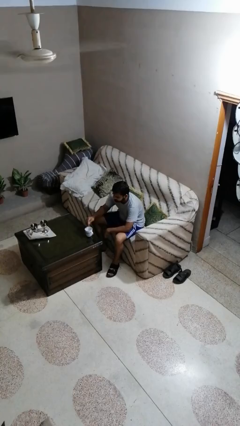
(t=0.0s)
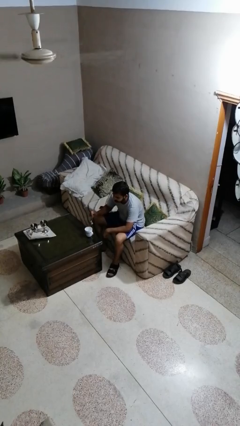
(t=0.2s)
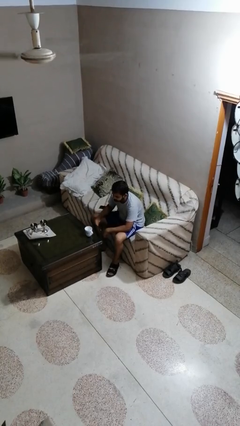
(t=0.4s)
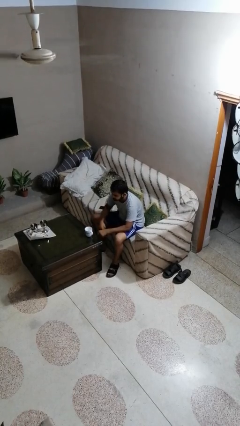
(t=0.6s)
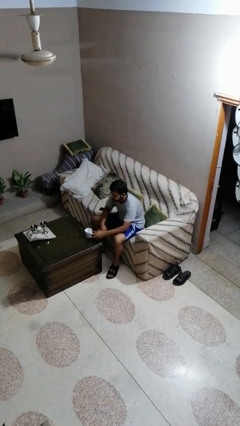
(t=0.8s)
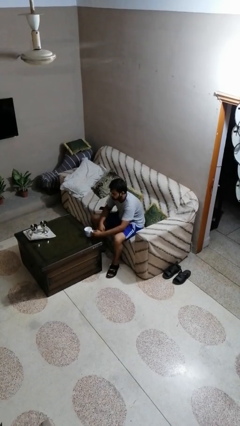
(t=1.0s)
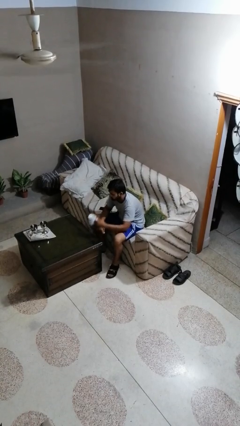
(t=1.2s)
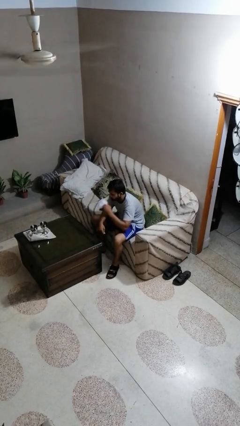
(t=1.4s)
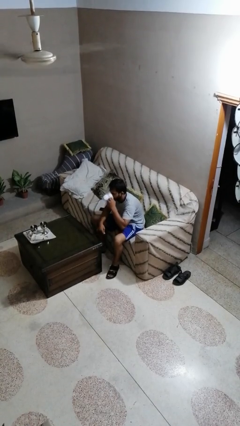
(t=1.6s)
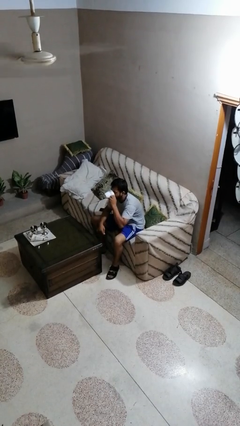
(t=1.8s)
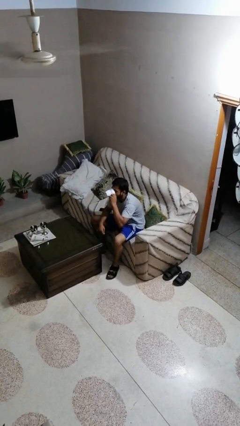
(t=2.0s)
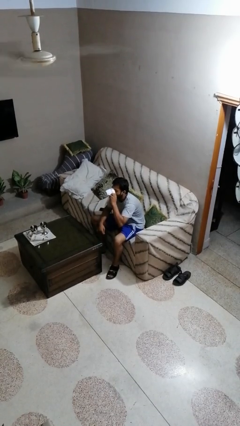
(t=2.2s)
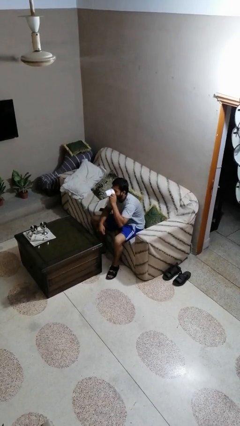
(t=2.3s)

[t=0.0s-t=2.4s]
person drinks from mug

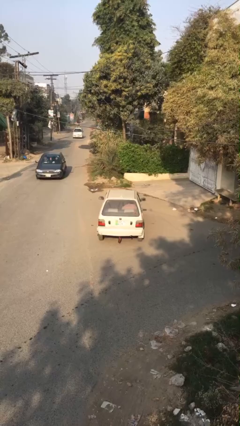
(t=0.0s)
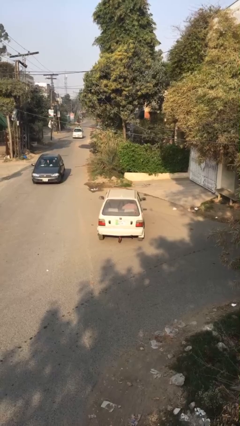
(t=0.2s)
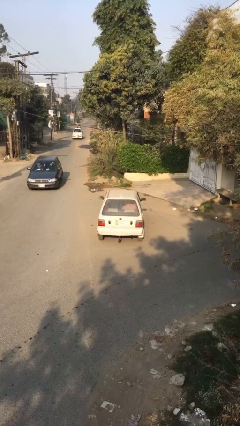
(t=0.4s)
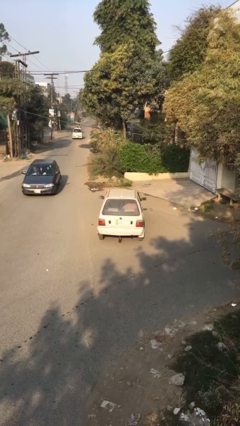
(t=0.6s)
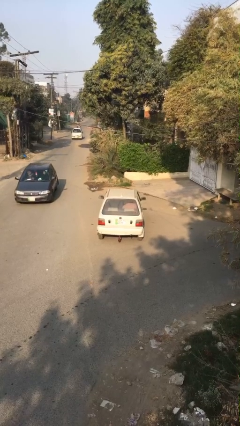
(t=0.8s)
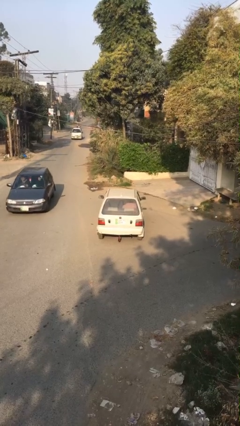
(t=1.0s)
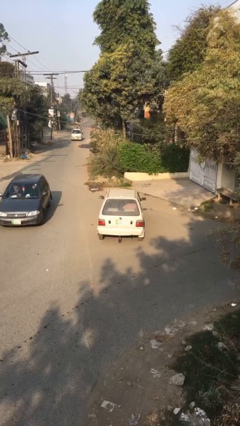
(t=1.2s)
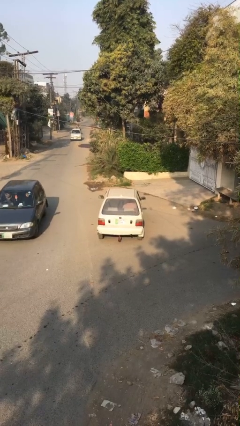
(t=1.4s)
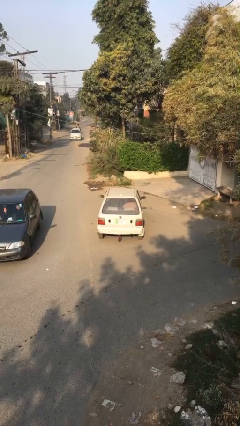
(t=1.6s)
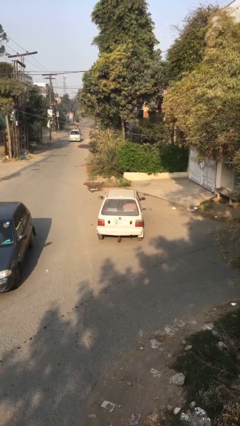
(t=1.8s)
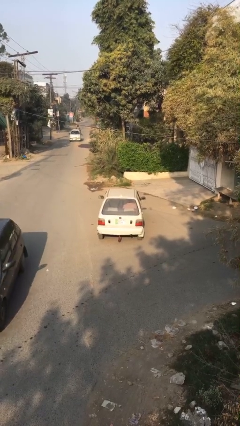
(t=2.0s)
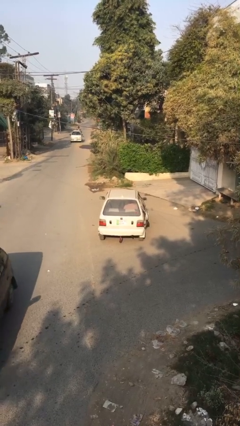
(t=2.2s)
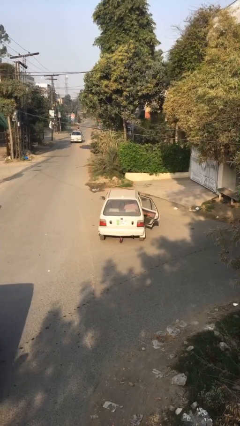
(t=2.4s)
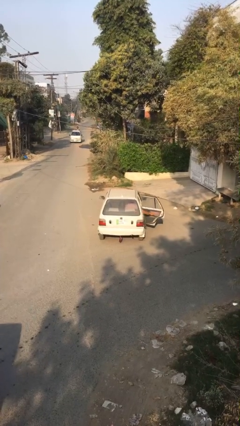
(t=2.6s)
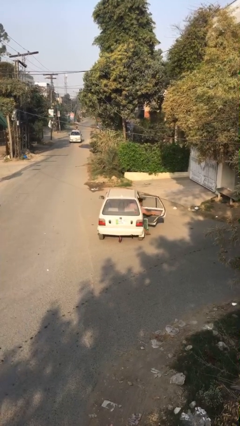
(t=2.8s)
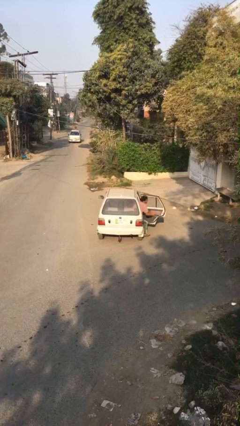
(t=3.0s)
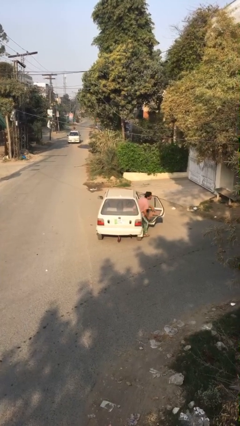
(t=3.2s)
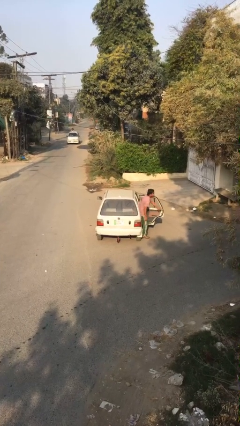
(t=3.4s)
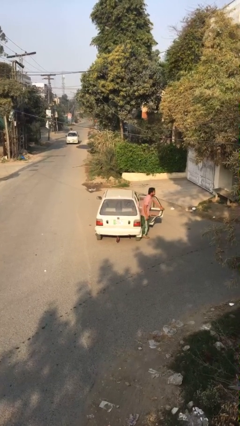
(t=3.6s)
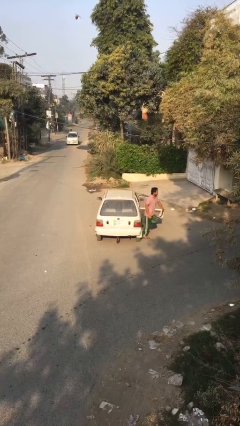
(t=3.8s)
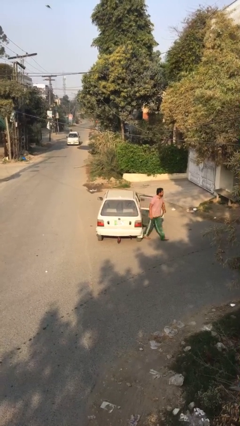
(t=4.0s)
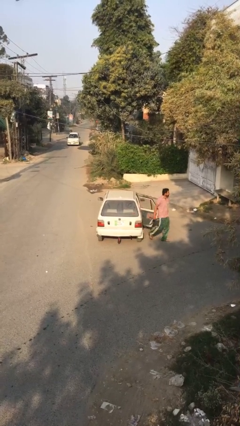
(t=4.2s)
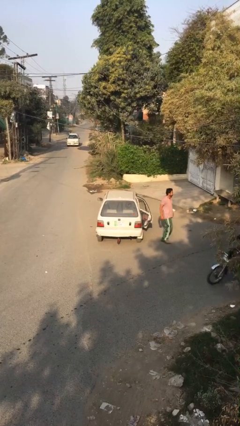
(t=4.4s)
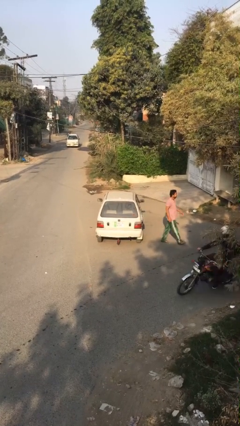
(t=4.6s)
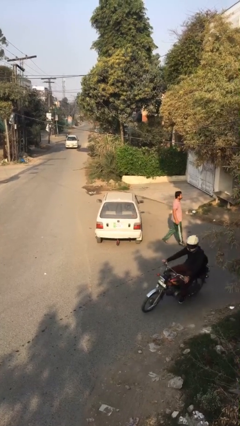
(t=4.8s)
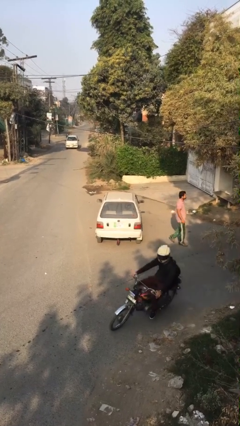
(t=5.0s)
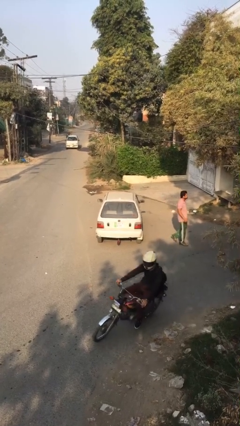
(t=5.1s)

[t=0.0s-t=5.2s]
car drops off person

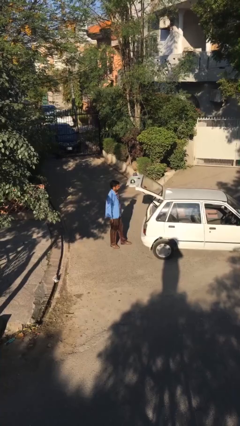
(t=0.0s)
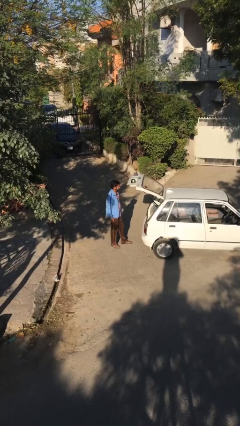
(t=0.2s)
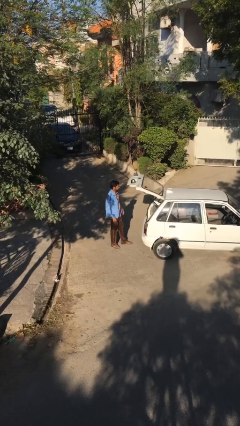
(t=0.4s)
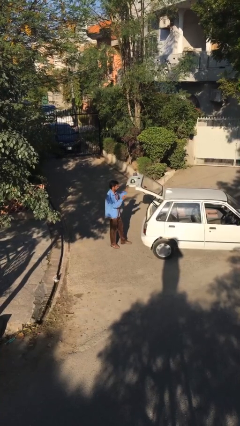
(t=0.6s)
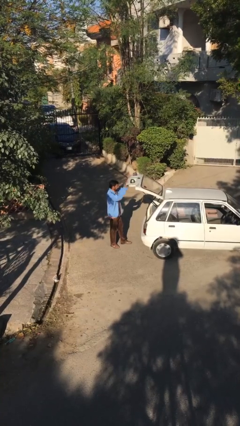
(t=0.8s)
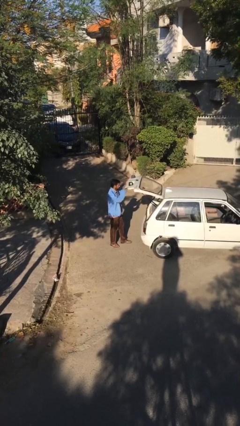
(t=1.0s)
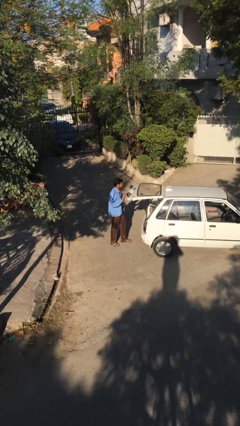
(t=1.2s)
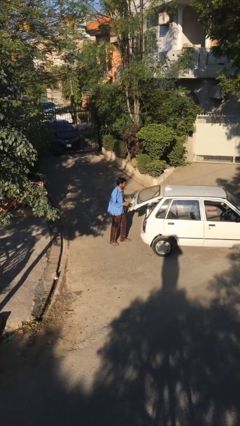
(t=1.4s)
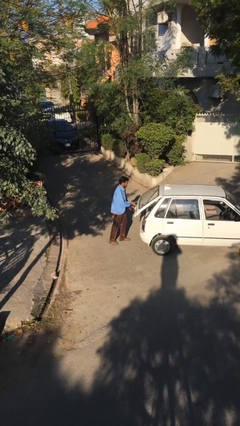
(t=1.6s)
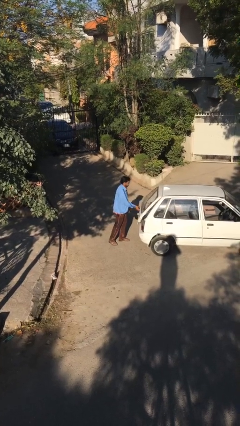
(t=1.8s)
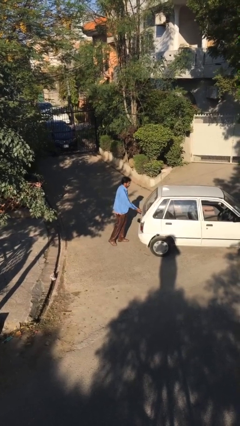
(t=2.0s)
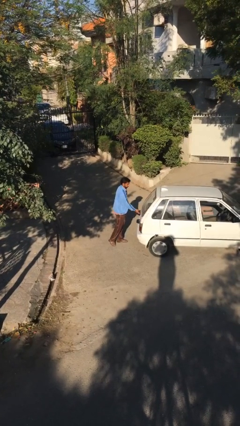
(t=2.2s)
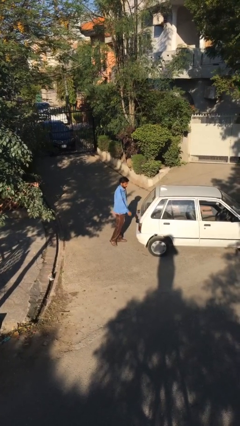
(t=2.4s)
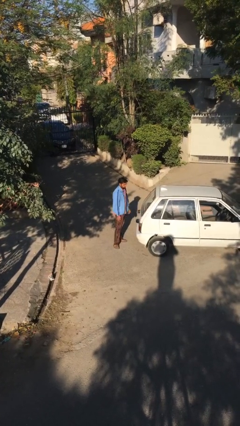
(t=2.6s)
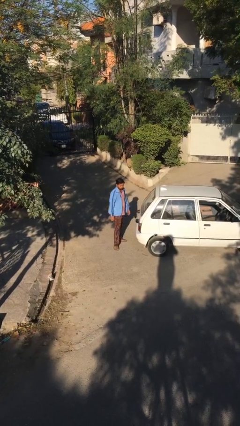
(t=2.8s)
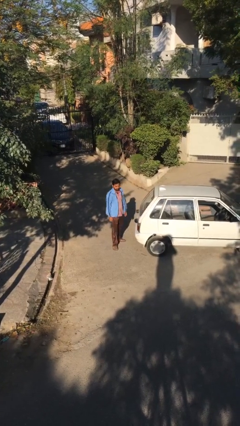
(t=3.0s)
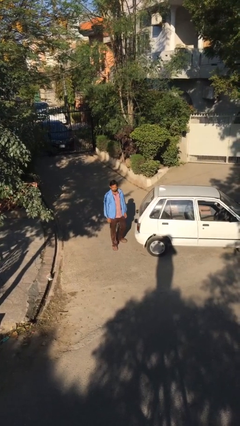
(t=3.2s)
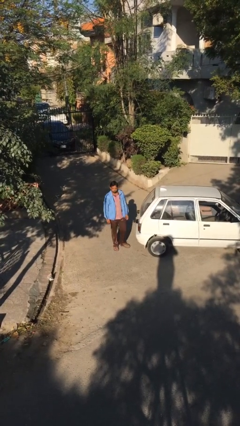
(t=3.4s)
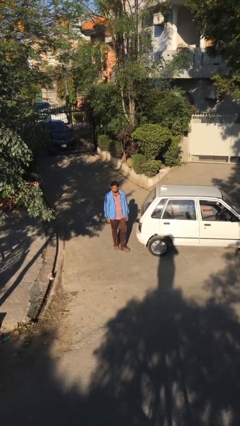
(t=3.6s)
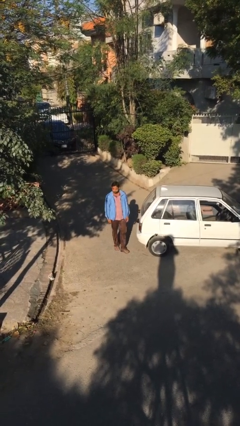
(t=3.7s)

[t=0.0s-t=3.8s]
person closes car trunk

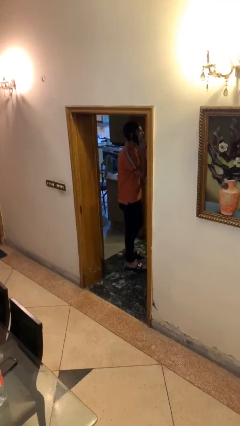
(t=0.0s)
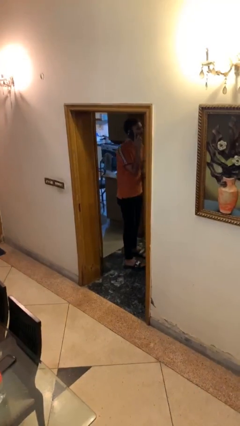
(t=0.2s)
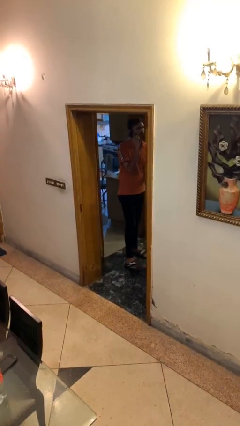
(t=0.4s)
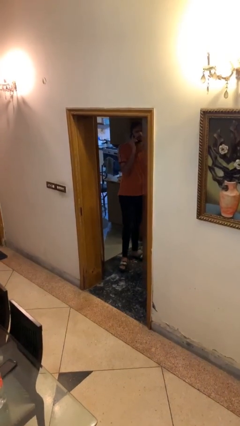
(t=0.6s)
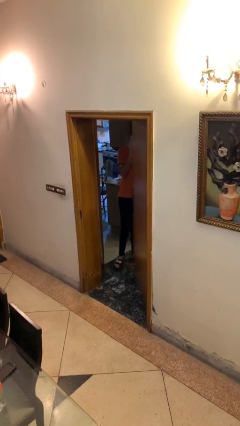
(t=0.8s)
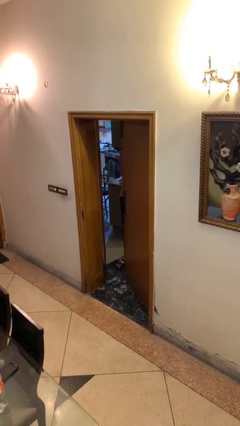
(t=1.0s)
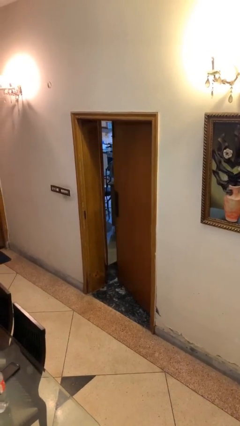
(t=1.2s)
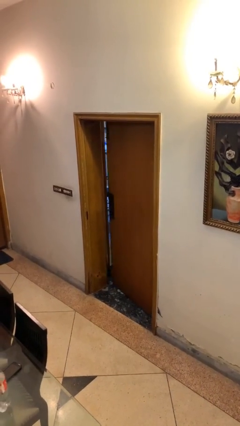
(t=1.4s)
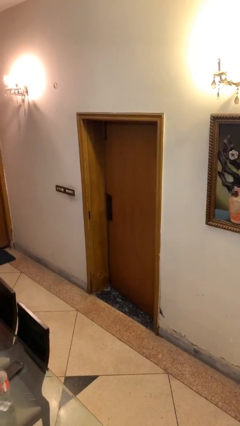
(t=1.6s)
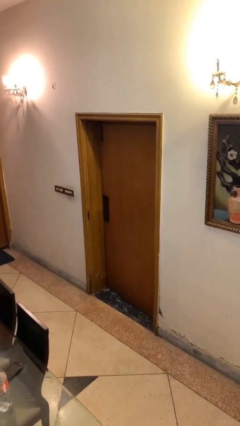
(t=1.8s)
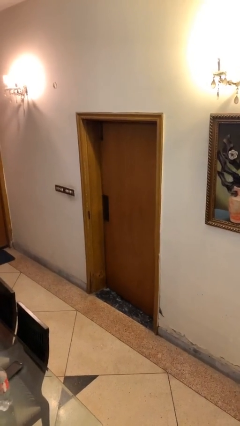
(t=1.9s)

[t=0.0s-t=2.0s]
person closes facility door

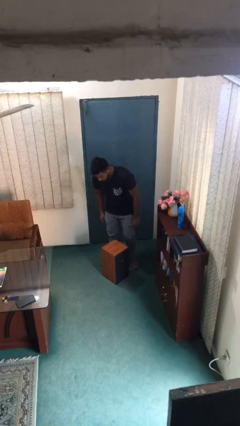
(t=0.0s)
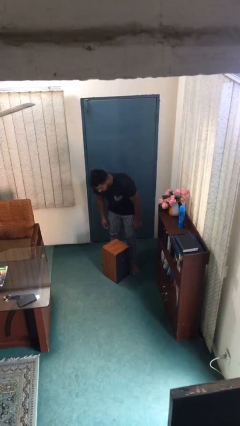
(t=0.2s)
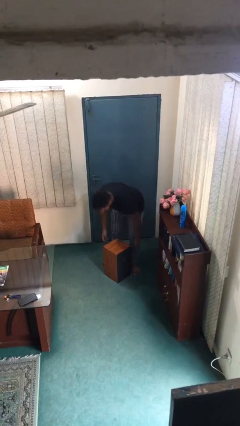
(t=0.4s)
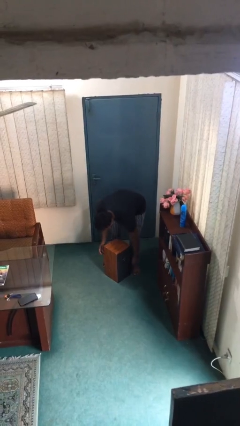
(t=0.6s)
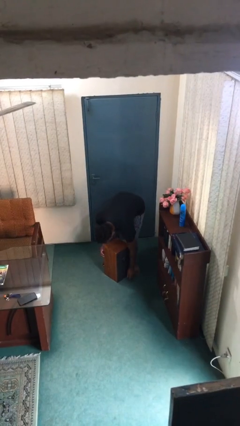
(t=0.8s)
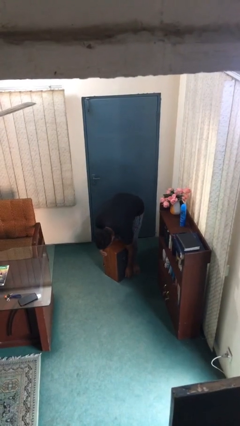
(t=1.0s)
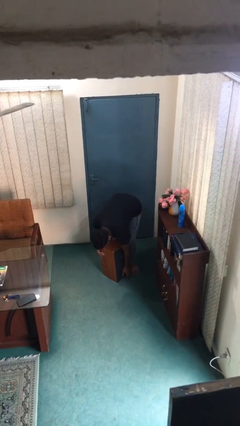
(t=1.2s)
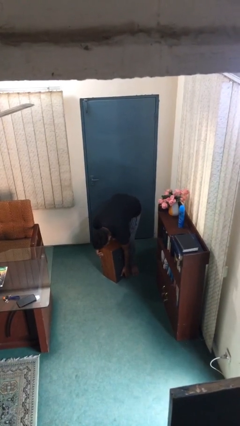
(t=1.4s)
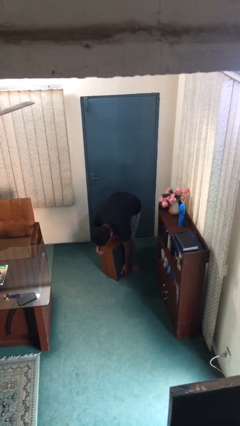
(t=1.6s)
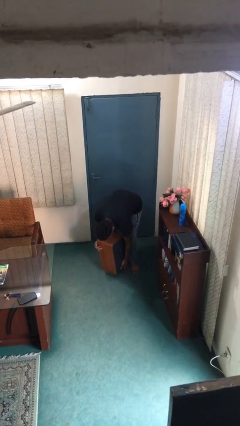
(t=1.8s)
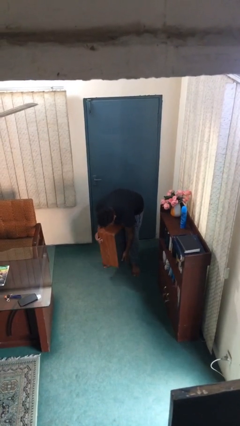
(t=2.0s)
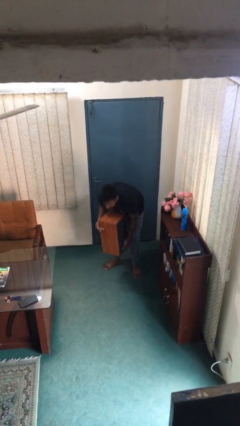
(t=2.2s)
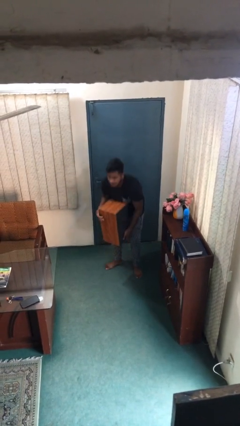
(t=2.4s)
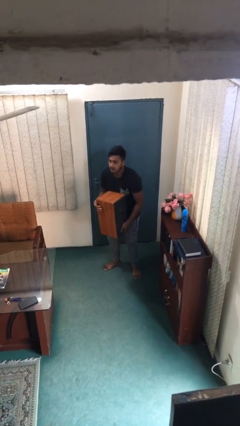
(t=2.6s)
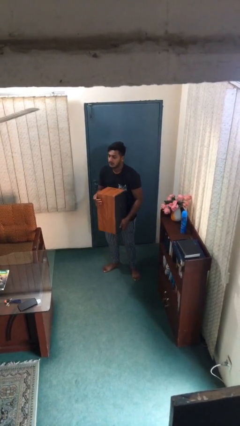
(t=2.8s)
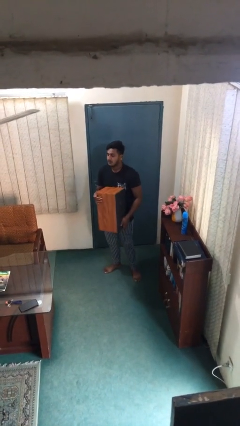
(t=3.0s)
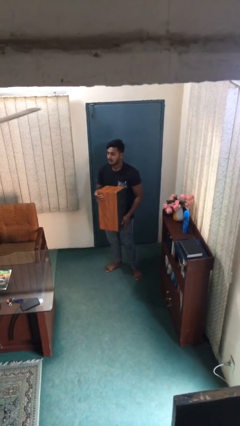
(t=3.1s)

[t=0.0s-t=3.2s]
person picks up object from floor

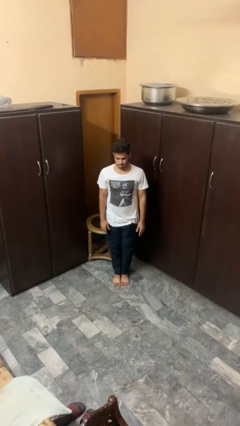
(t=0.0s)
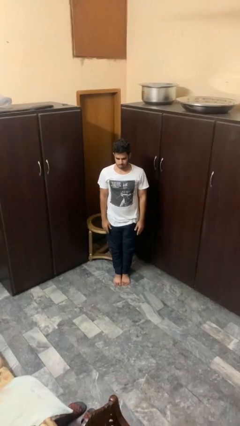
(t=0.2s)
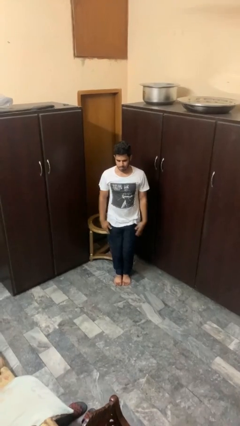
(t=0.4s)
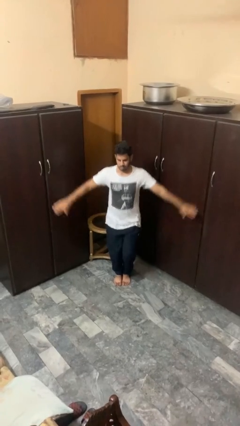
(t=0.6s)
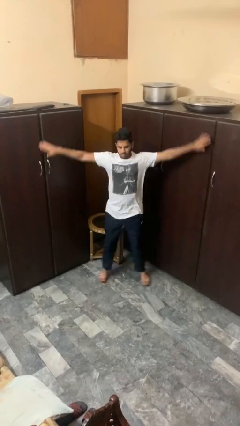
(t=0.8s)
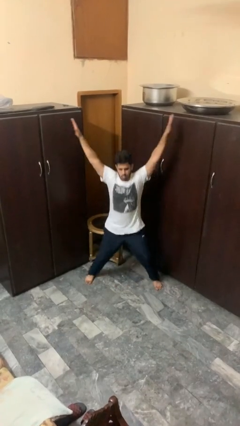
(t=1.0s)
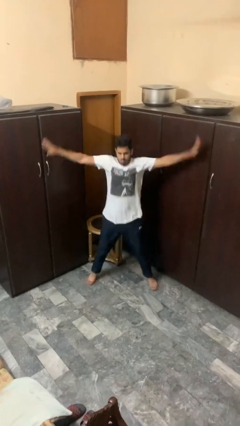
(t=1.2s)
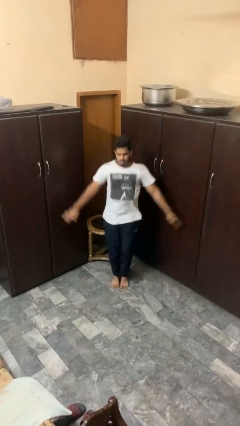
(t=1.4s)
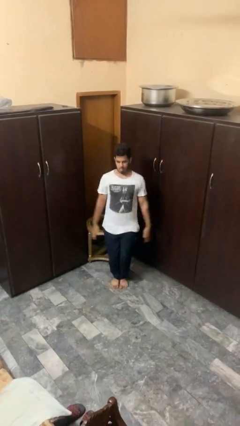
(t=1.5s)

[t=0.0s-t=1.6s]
person exercises with jumping jacks
